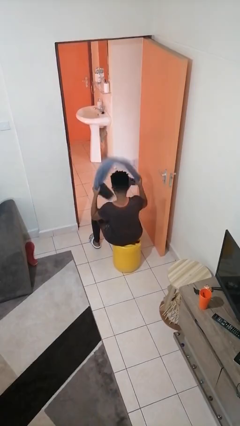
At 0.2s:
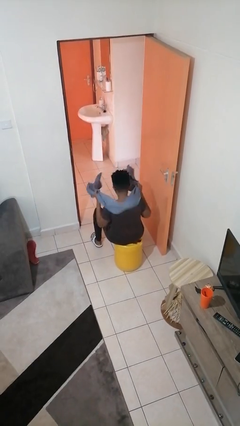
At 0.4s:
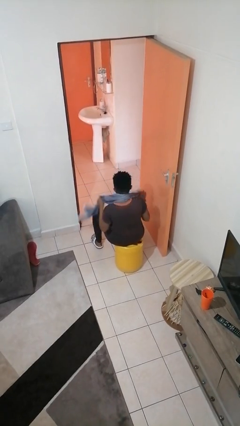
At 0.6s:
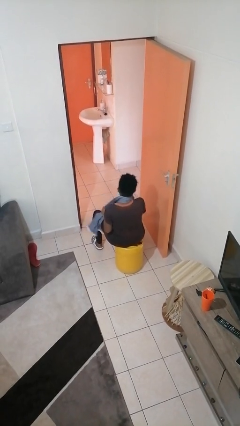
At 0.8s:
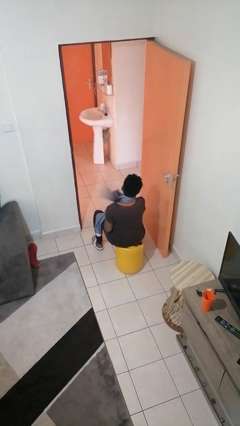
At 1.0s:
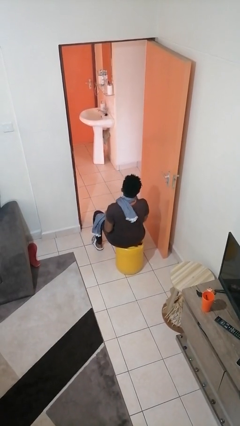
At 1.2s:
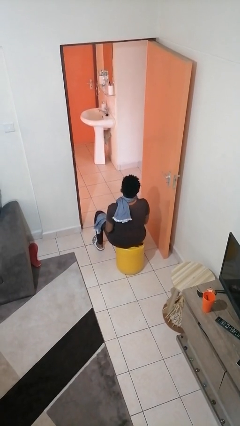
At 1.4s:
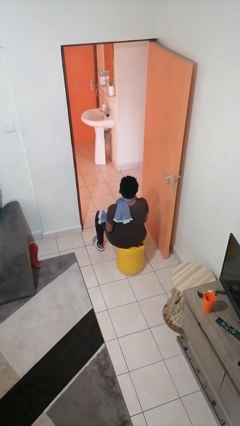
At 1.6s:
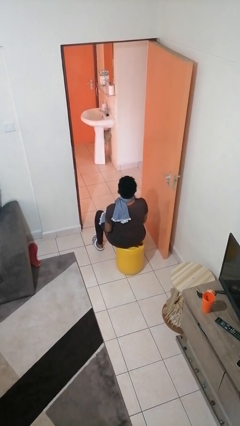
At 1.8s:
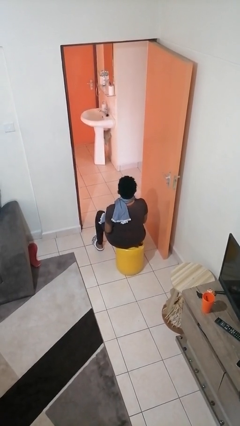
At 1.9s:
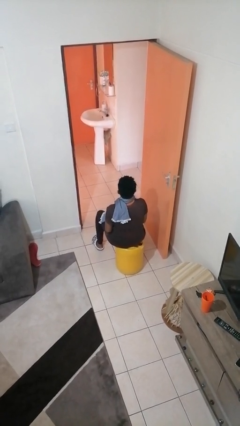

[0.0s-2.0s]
person puts on scarf

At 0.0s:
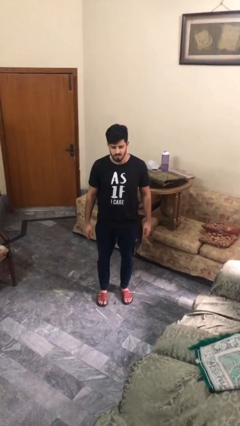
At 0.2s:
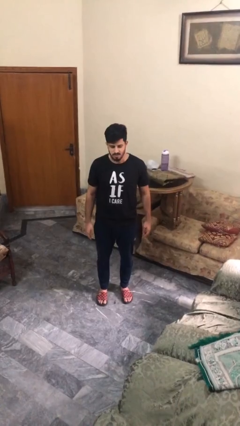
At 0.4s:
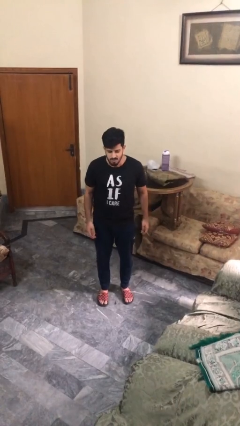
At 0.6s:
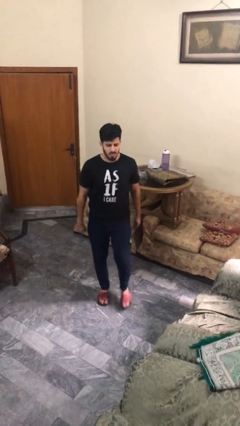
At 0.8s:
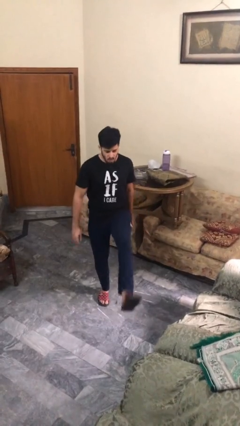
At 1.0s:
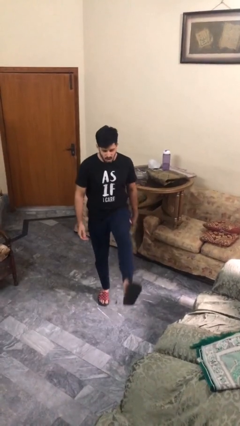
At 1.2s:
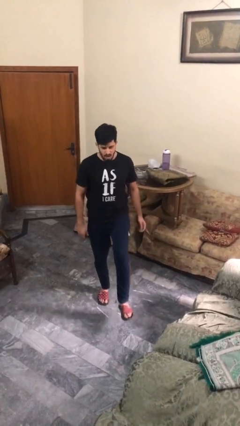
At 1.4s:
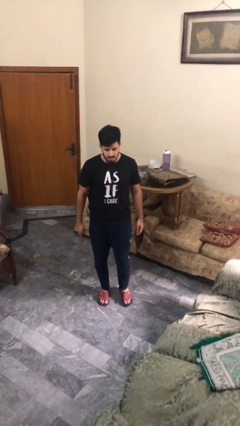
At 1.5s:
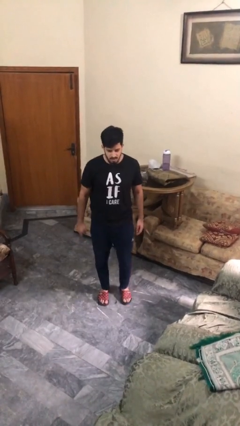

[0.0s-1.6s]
person karate kicks

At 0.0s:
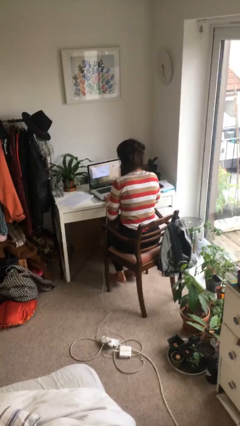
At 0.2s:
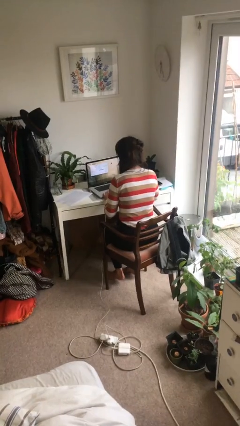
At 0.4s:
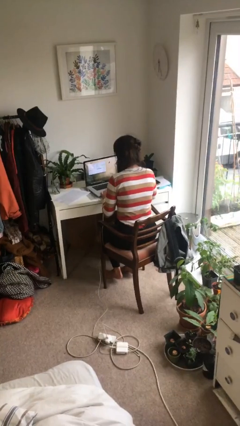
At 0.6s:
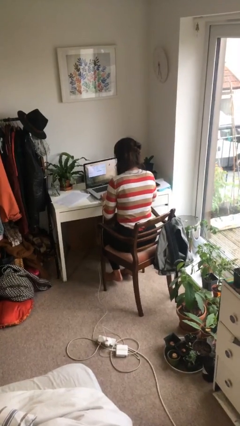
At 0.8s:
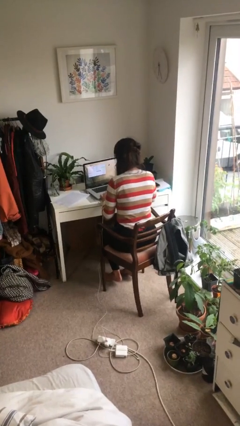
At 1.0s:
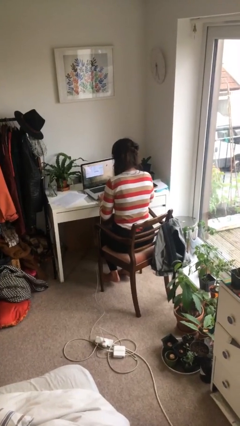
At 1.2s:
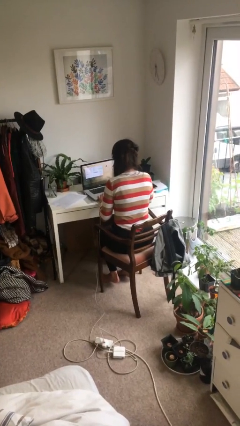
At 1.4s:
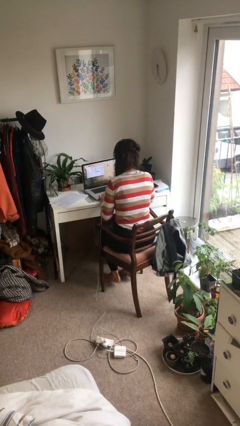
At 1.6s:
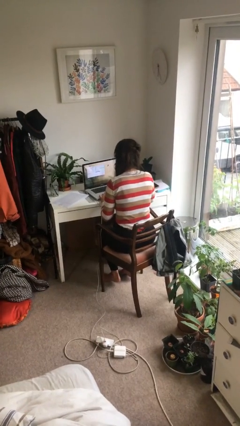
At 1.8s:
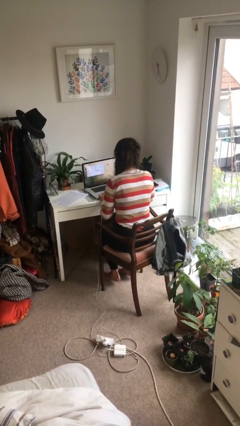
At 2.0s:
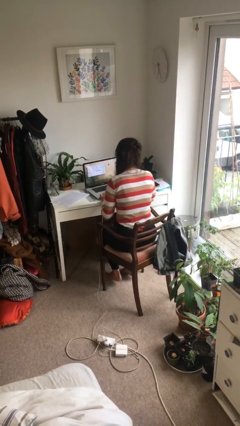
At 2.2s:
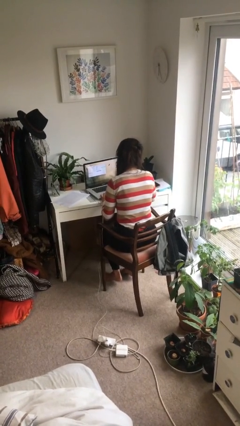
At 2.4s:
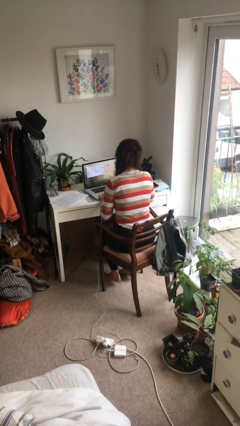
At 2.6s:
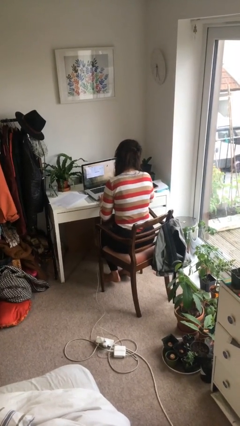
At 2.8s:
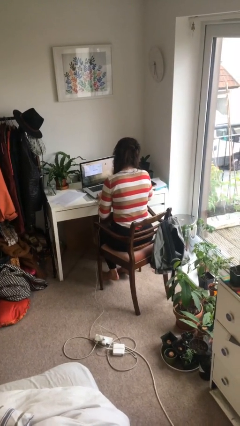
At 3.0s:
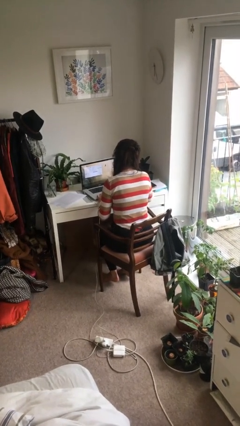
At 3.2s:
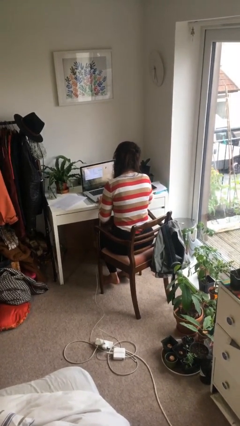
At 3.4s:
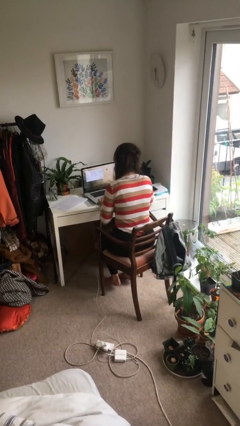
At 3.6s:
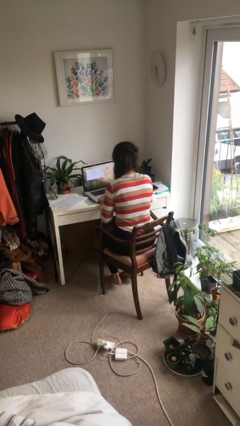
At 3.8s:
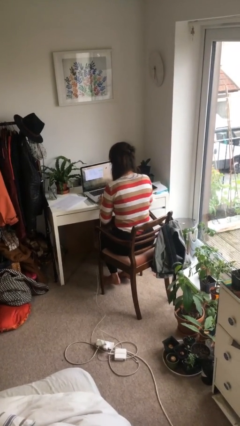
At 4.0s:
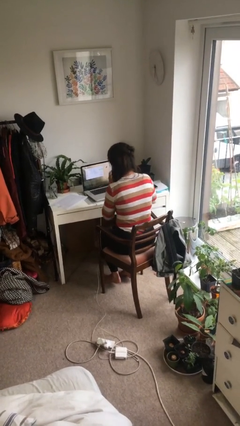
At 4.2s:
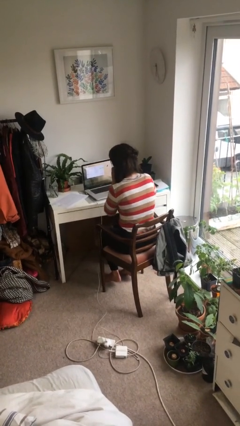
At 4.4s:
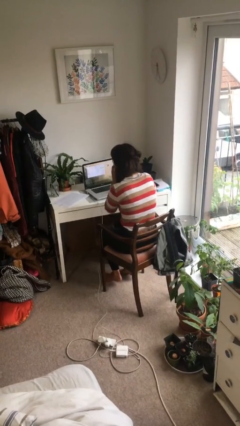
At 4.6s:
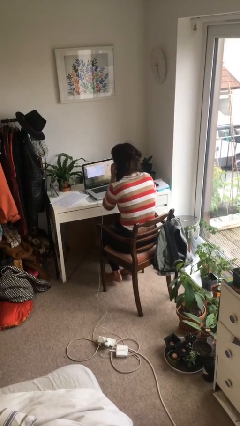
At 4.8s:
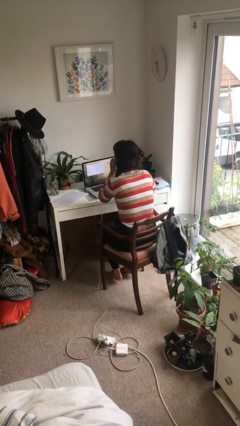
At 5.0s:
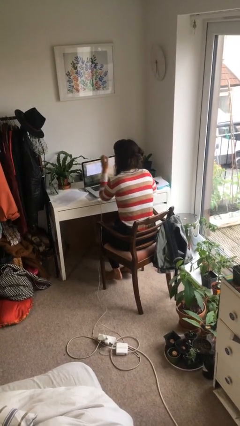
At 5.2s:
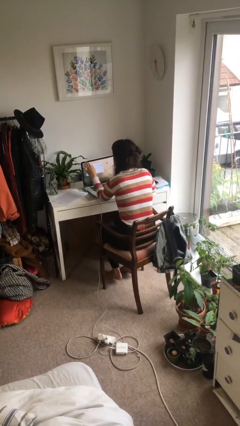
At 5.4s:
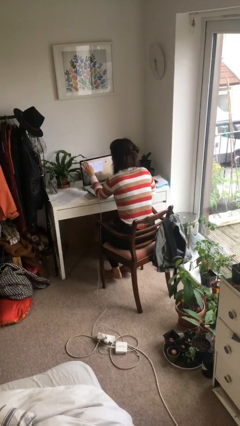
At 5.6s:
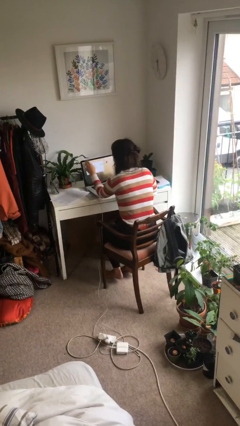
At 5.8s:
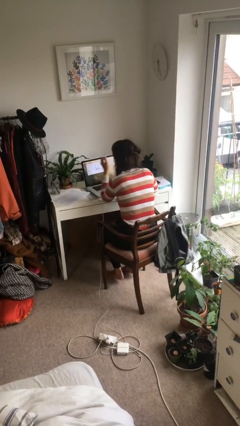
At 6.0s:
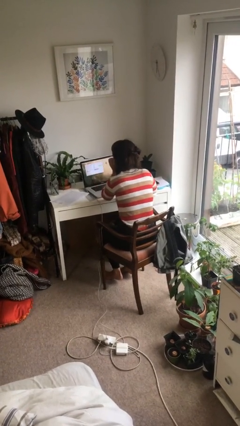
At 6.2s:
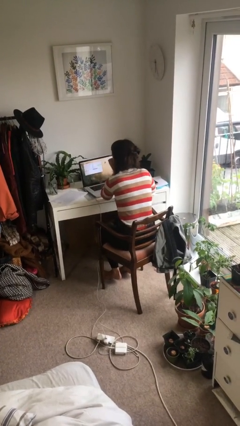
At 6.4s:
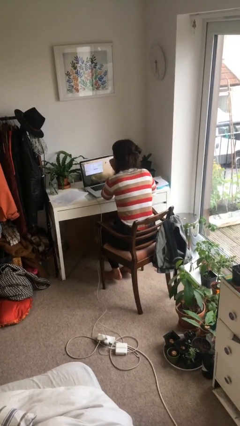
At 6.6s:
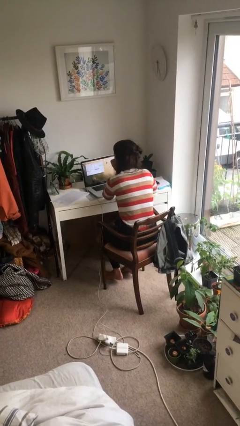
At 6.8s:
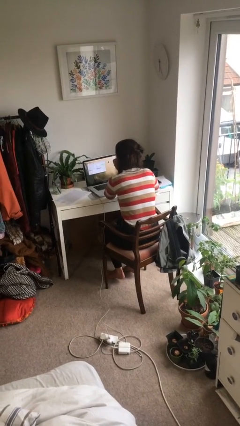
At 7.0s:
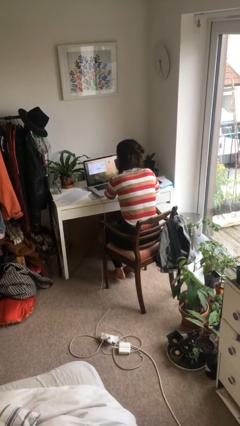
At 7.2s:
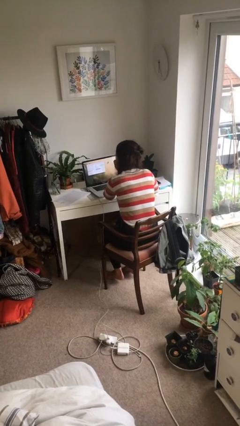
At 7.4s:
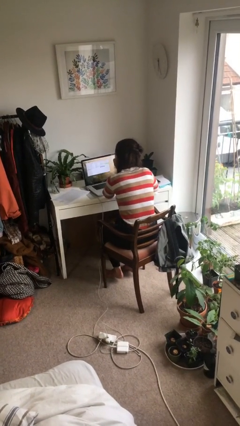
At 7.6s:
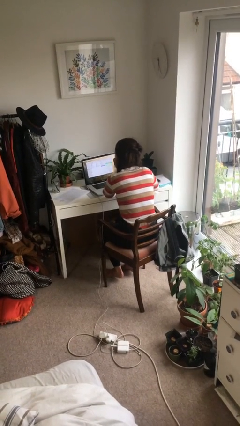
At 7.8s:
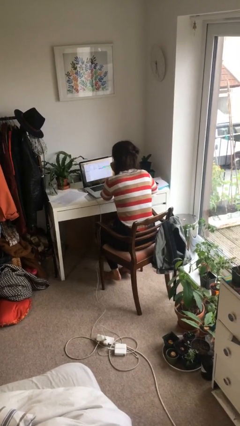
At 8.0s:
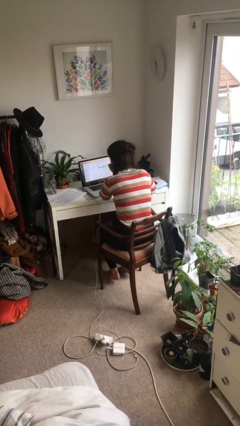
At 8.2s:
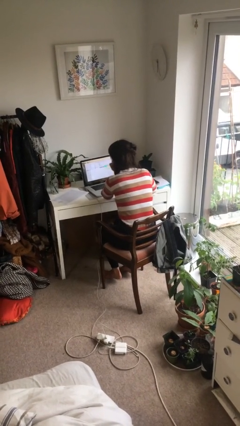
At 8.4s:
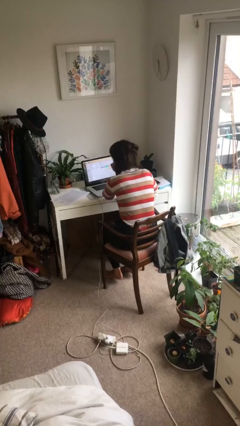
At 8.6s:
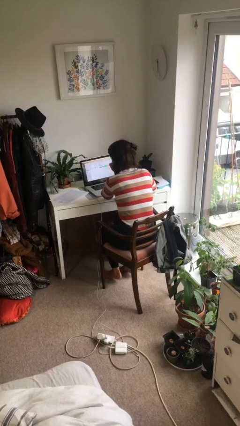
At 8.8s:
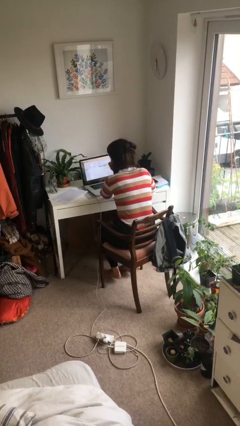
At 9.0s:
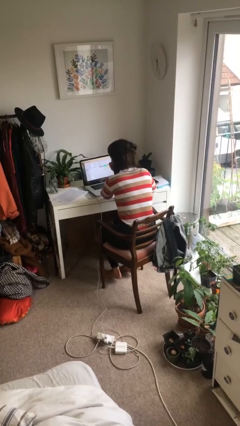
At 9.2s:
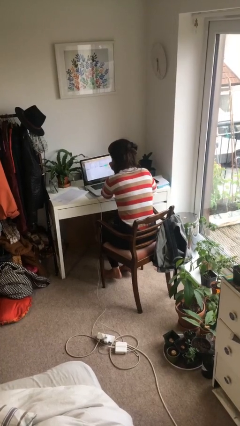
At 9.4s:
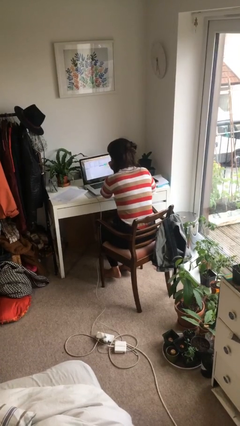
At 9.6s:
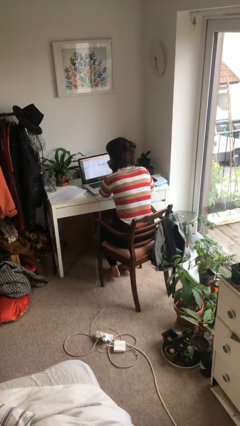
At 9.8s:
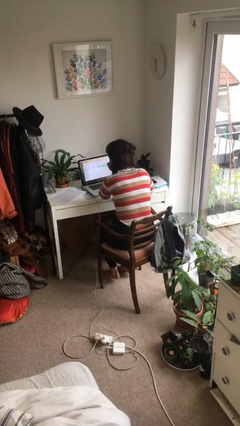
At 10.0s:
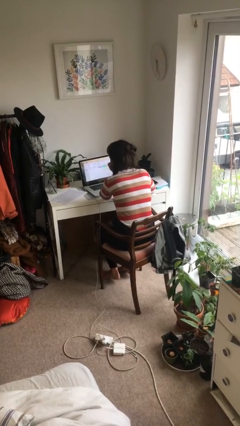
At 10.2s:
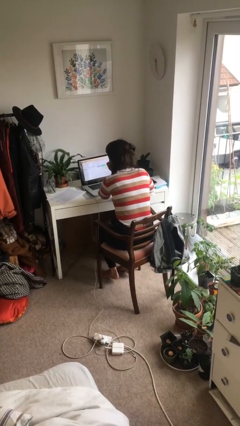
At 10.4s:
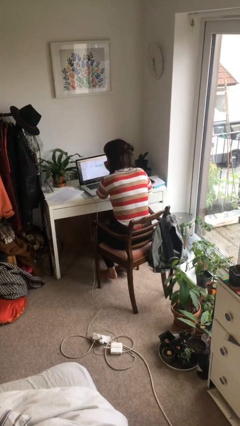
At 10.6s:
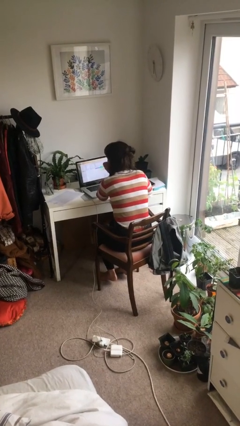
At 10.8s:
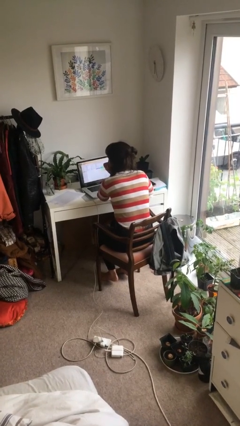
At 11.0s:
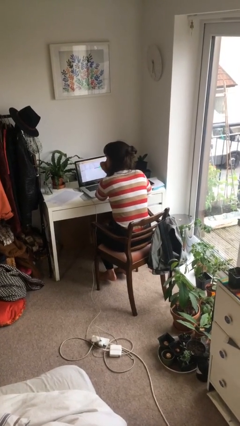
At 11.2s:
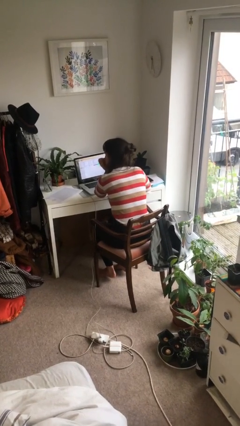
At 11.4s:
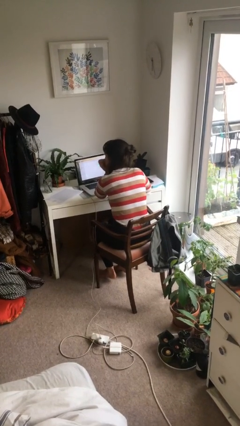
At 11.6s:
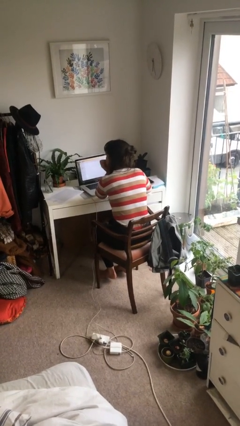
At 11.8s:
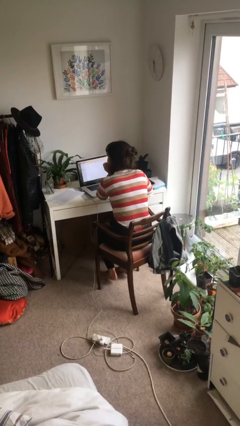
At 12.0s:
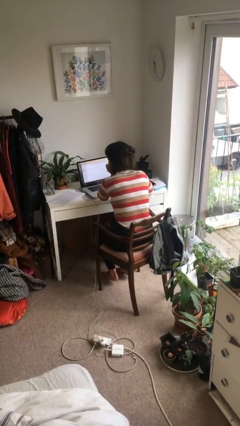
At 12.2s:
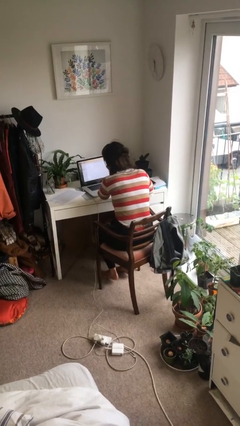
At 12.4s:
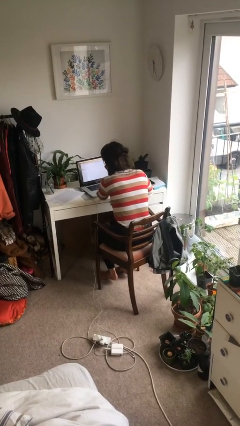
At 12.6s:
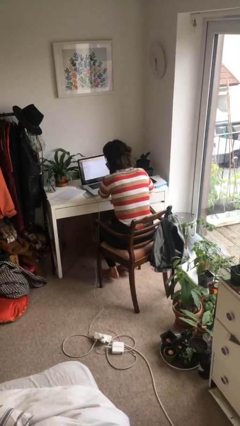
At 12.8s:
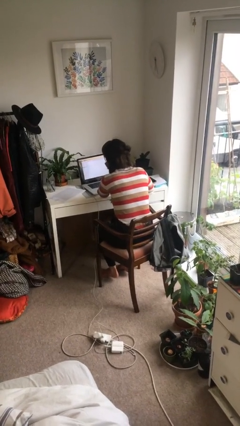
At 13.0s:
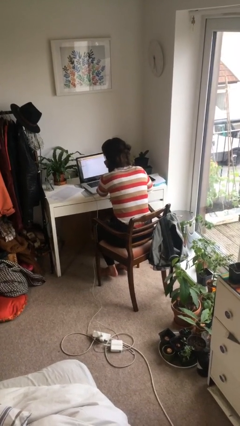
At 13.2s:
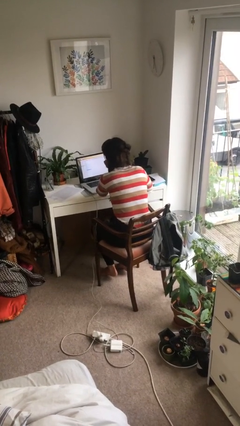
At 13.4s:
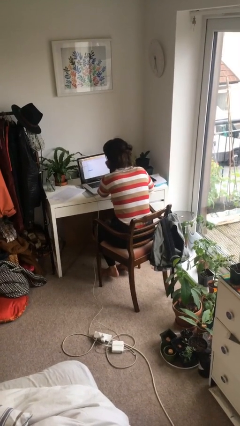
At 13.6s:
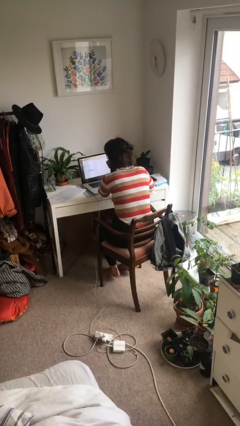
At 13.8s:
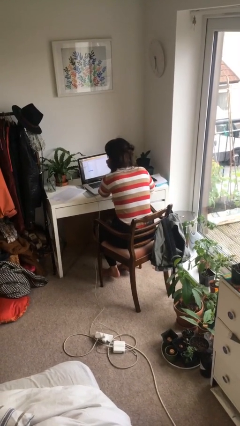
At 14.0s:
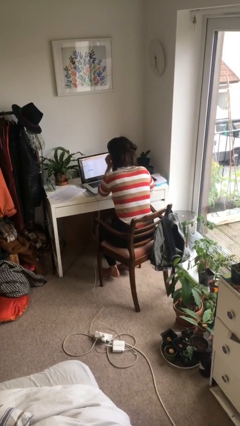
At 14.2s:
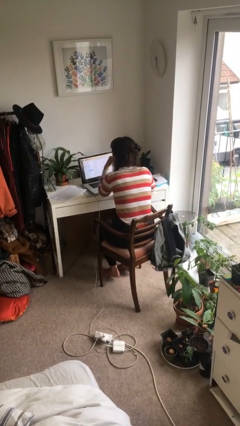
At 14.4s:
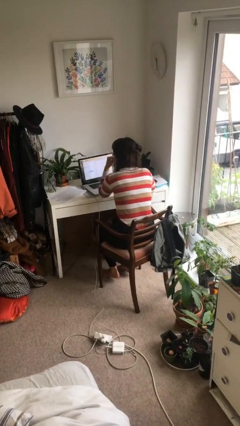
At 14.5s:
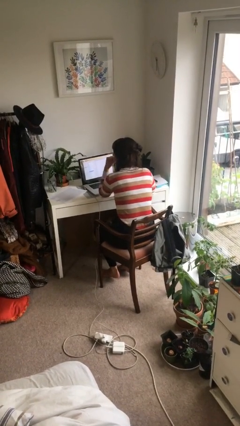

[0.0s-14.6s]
person interacts with laptop

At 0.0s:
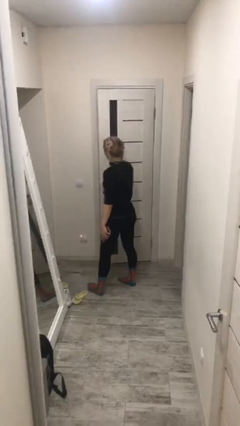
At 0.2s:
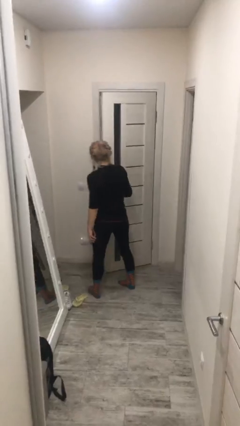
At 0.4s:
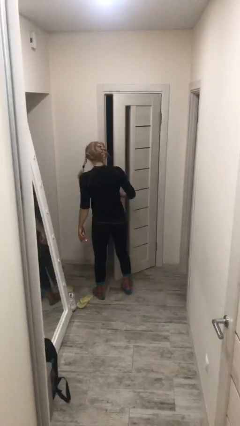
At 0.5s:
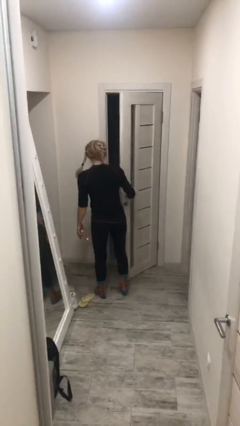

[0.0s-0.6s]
person opens facility door
